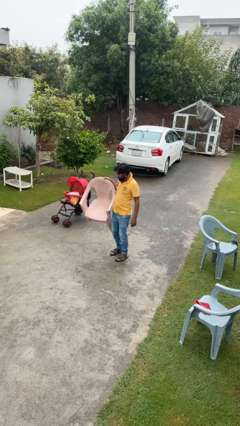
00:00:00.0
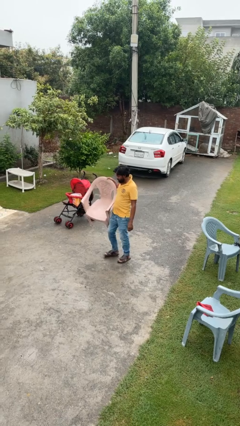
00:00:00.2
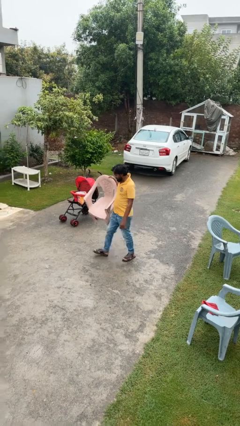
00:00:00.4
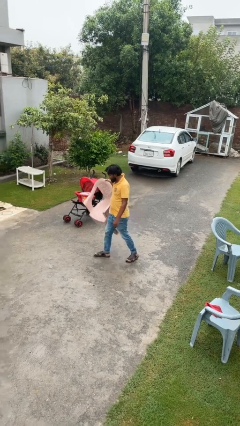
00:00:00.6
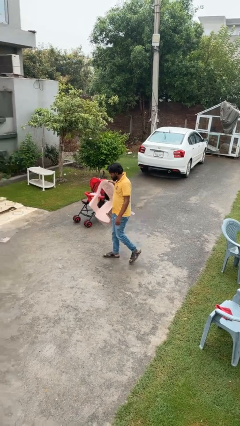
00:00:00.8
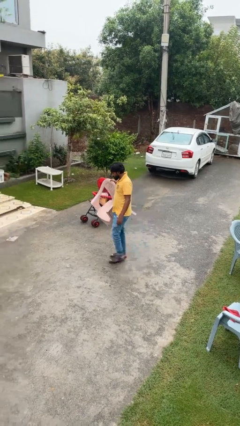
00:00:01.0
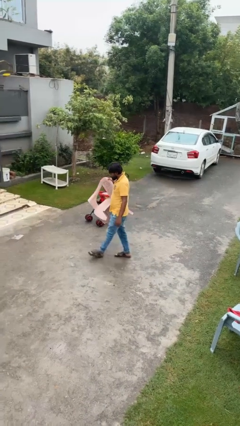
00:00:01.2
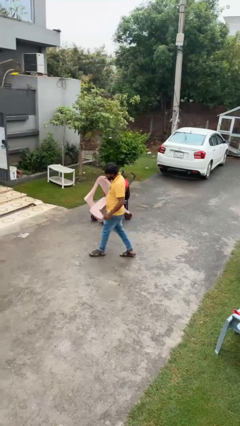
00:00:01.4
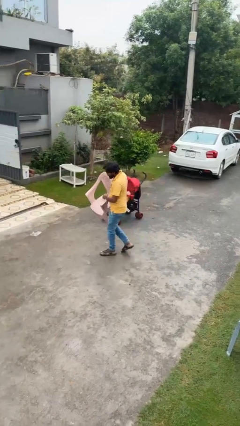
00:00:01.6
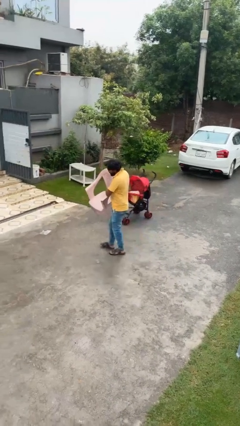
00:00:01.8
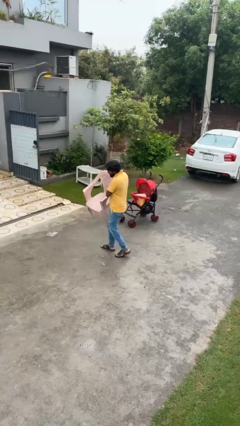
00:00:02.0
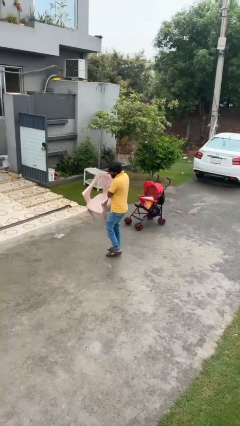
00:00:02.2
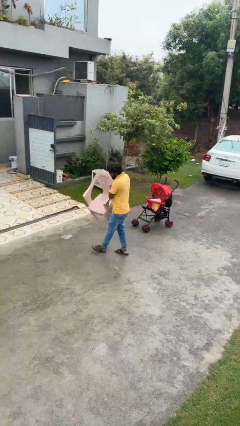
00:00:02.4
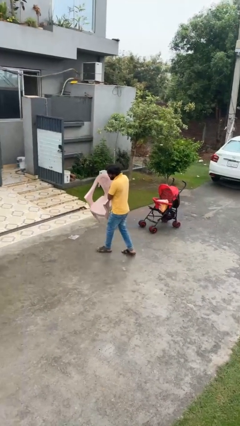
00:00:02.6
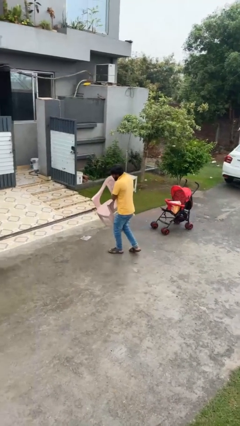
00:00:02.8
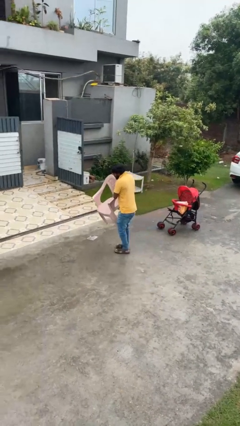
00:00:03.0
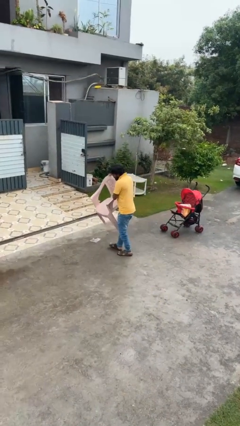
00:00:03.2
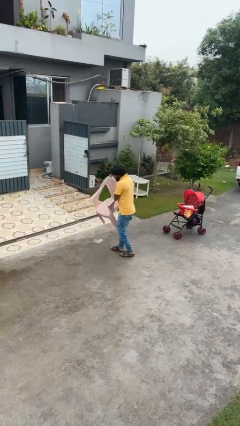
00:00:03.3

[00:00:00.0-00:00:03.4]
person carries furniture

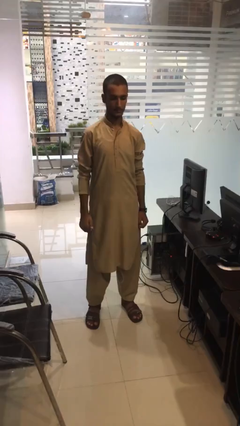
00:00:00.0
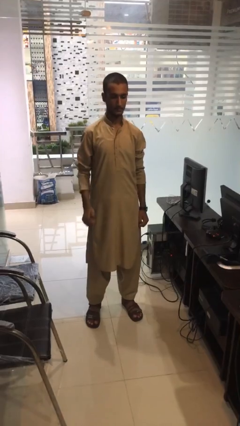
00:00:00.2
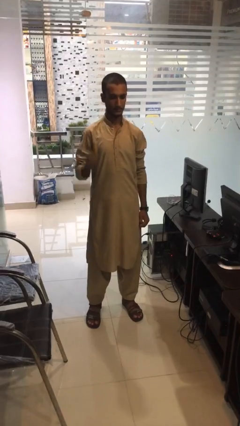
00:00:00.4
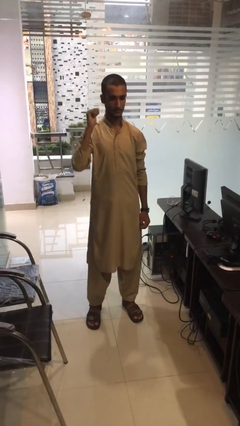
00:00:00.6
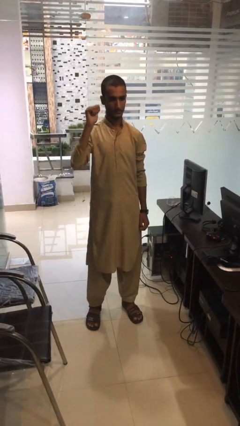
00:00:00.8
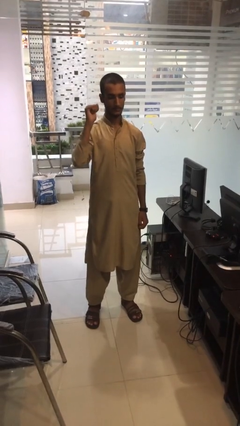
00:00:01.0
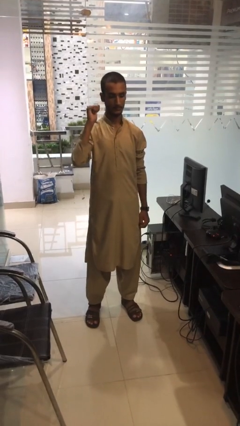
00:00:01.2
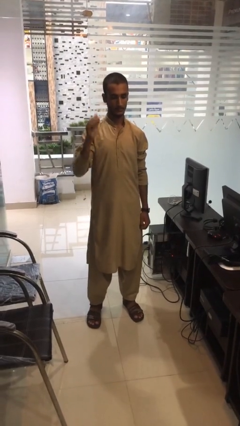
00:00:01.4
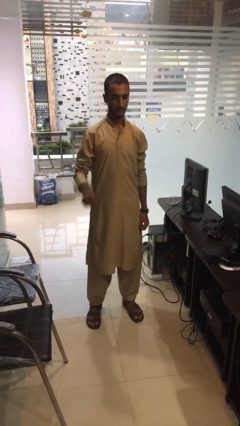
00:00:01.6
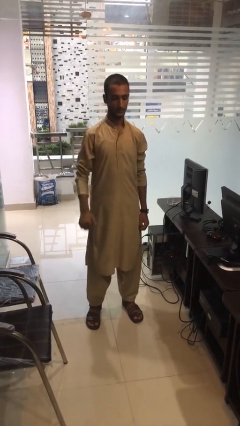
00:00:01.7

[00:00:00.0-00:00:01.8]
person gestures behind me

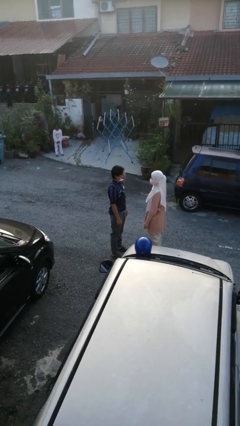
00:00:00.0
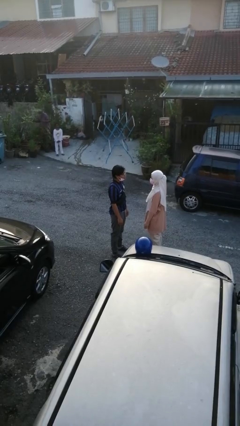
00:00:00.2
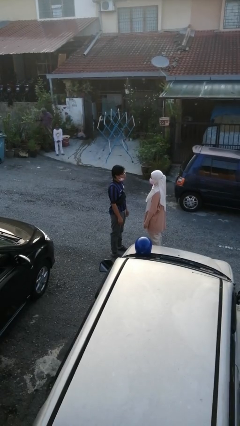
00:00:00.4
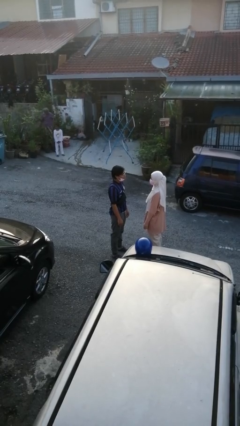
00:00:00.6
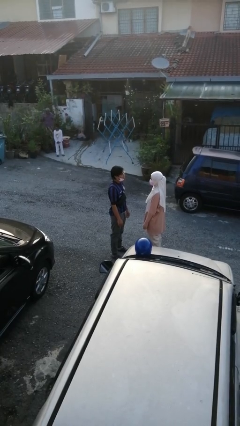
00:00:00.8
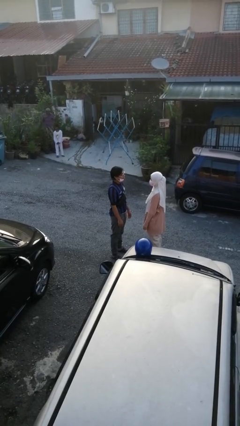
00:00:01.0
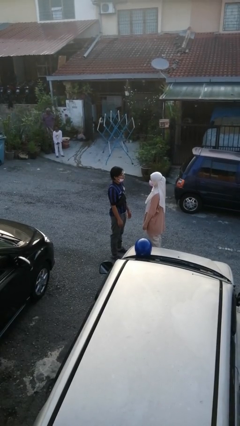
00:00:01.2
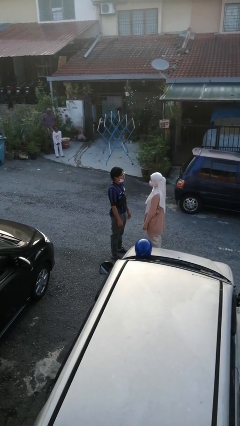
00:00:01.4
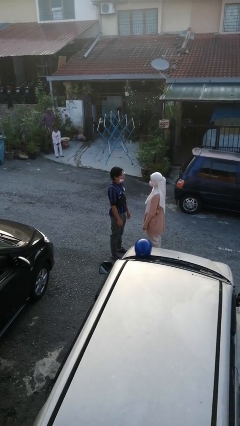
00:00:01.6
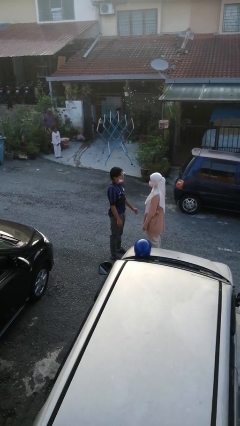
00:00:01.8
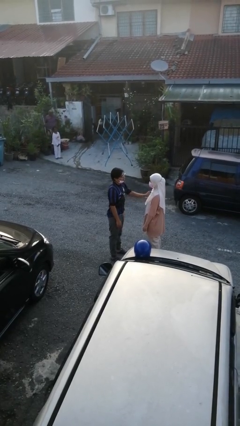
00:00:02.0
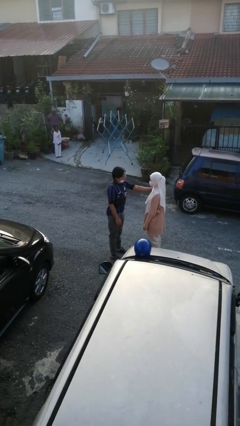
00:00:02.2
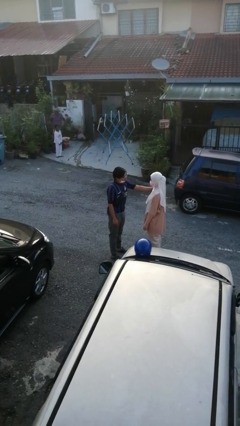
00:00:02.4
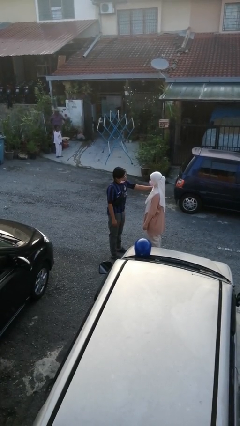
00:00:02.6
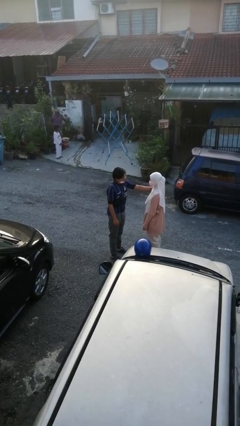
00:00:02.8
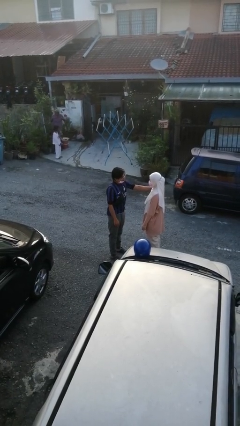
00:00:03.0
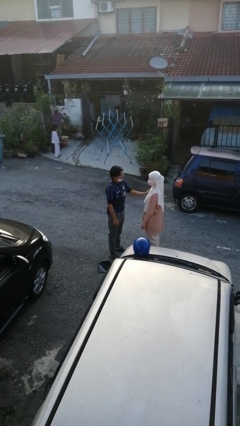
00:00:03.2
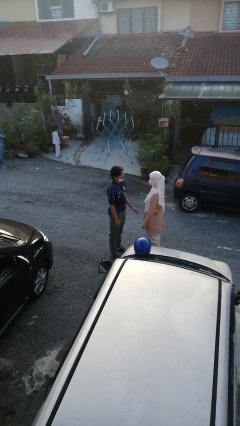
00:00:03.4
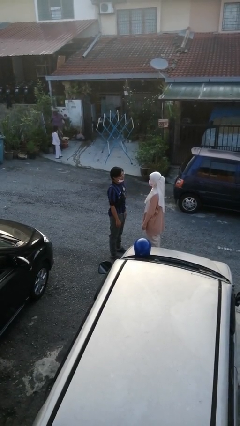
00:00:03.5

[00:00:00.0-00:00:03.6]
person pounds shoulders of person

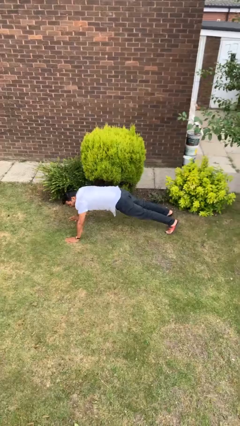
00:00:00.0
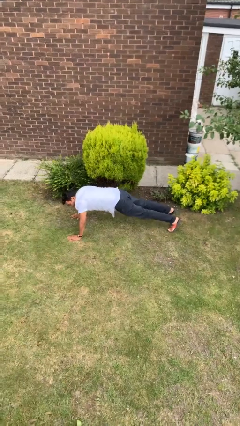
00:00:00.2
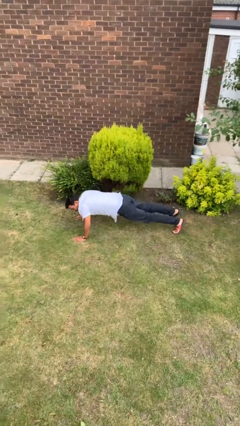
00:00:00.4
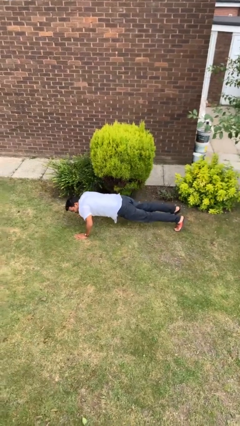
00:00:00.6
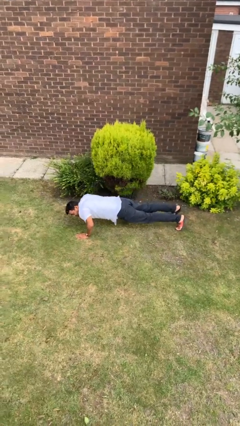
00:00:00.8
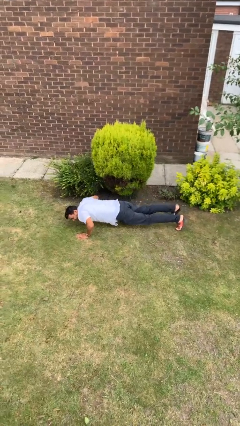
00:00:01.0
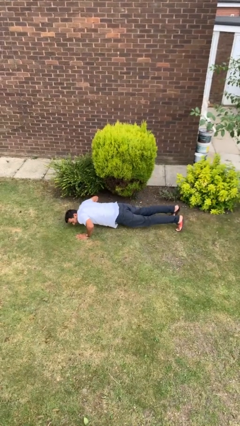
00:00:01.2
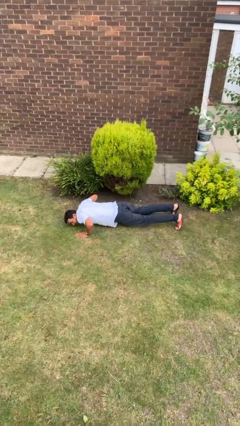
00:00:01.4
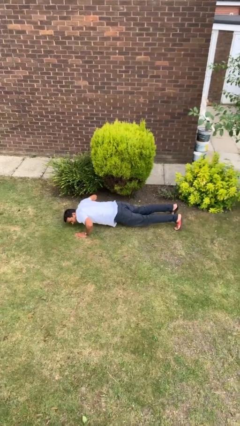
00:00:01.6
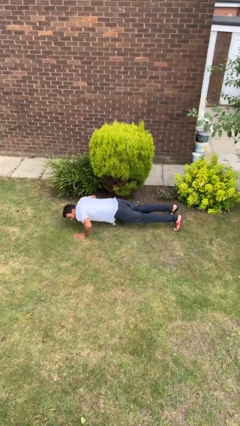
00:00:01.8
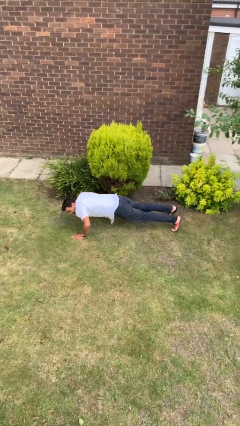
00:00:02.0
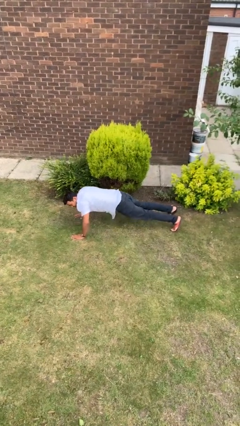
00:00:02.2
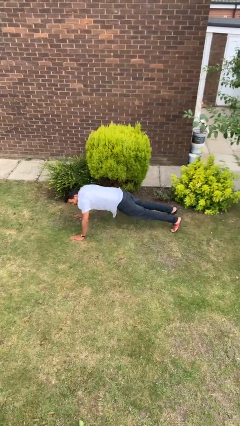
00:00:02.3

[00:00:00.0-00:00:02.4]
person exercises with pushup

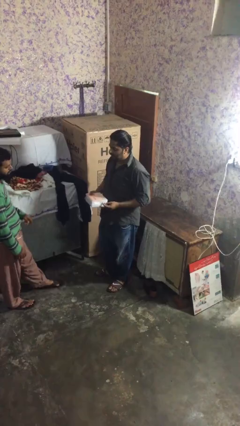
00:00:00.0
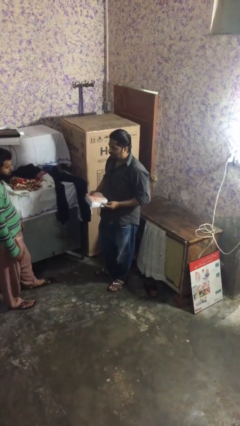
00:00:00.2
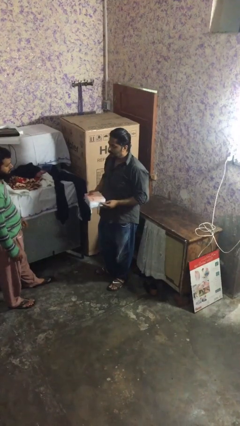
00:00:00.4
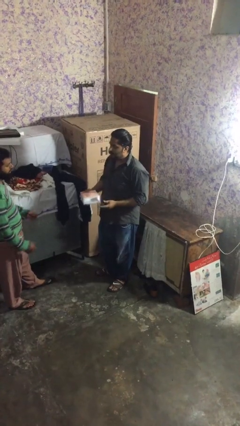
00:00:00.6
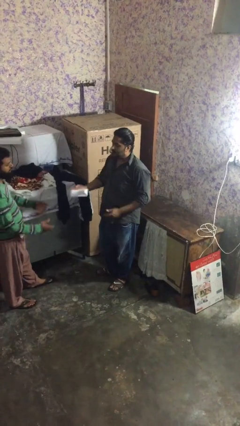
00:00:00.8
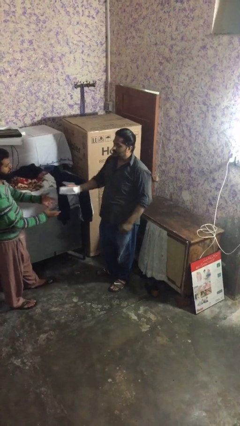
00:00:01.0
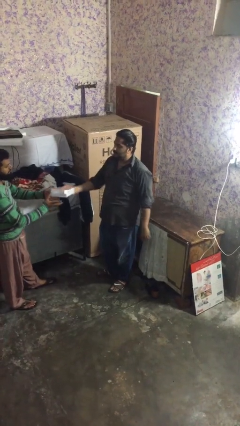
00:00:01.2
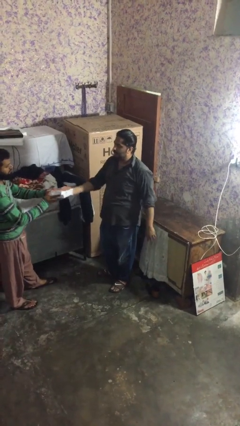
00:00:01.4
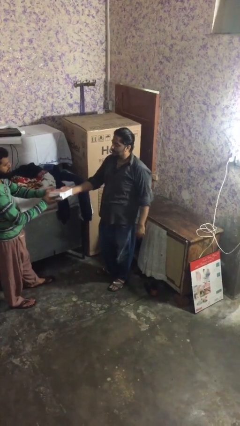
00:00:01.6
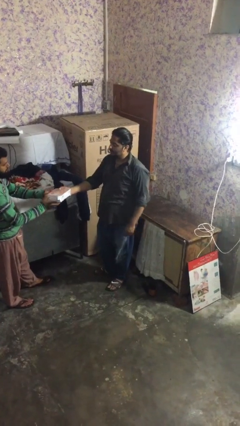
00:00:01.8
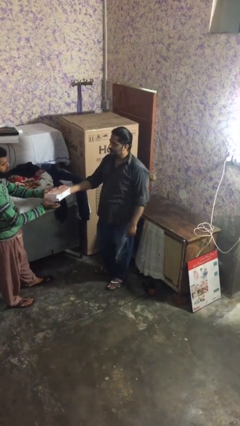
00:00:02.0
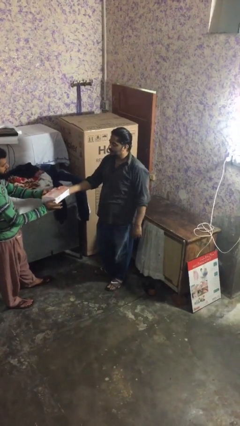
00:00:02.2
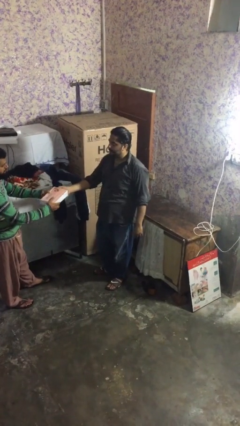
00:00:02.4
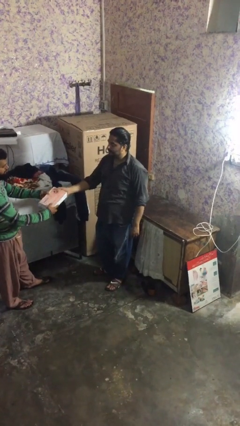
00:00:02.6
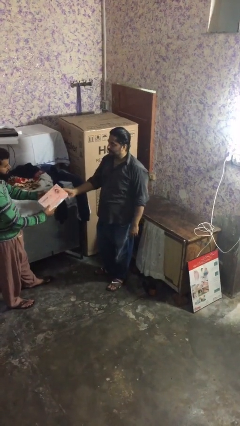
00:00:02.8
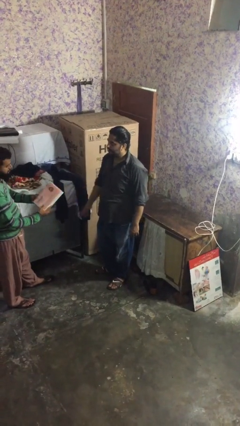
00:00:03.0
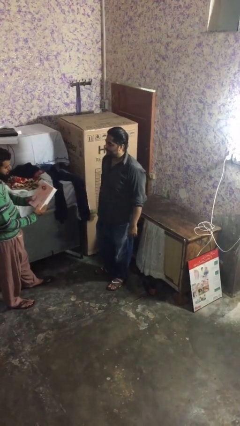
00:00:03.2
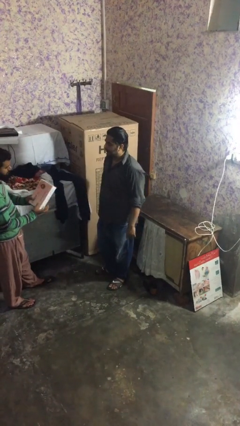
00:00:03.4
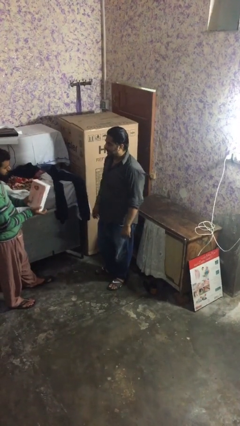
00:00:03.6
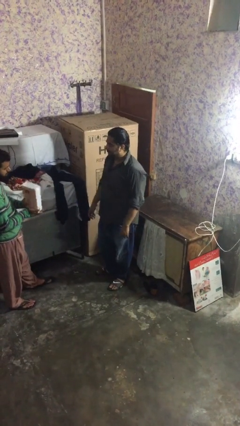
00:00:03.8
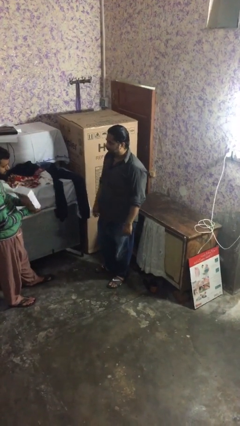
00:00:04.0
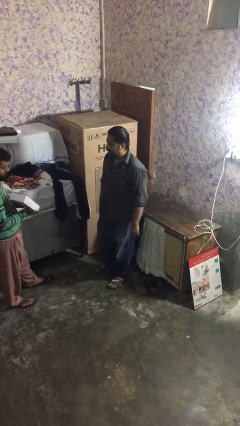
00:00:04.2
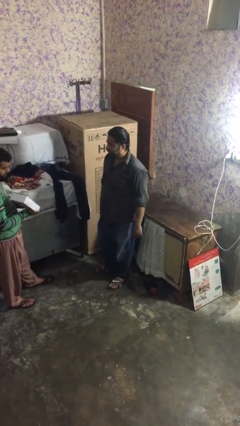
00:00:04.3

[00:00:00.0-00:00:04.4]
person transfers object to person

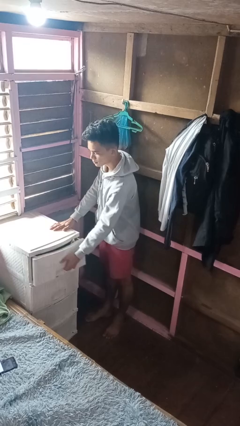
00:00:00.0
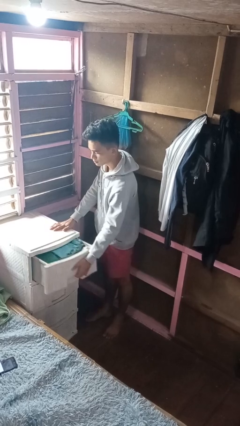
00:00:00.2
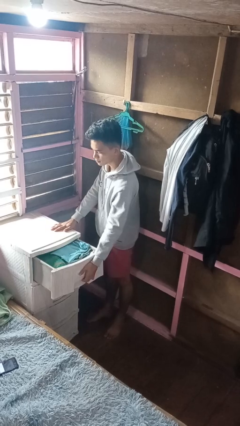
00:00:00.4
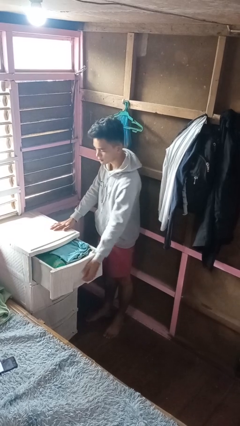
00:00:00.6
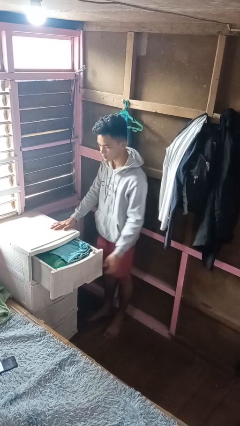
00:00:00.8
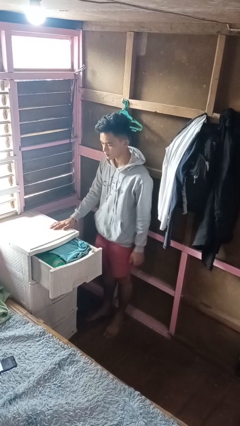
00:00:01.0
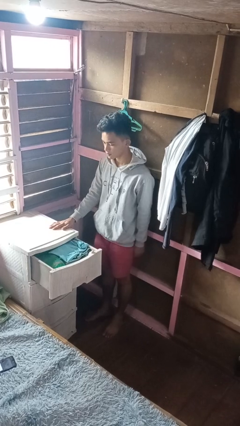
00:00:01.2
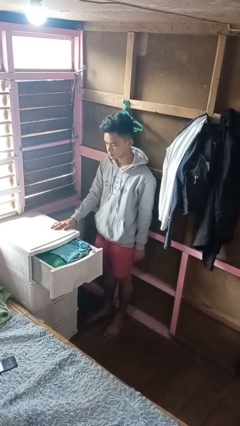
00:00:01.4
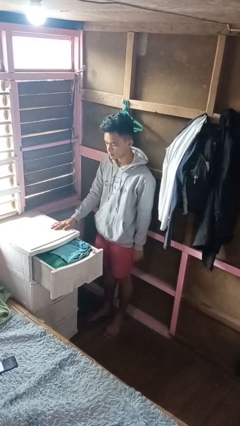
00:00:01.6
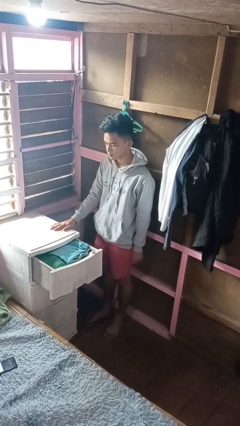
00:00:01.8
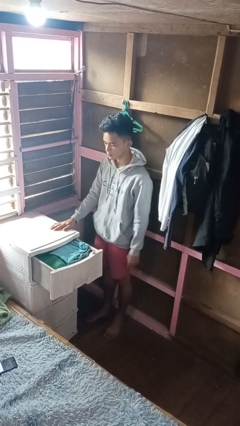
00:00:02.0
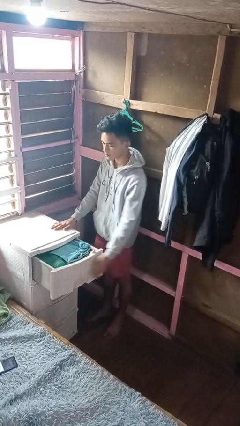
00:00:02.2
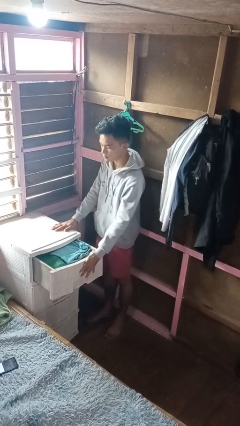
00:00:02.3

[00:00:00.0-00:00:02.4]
person opens dresser drawer
